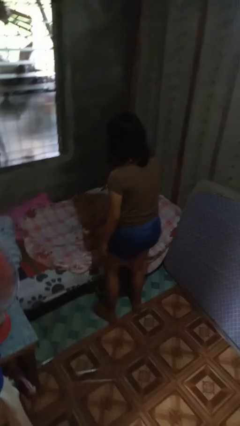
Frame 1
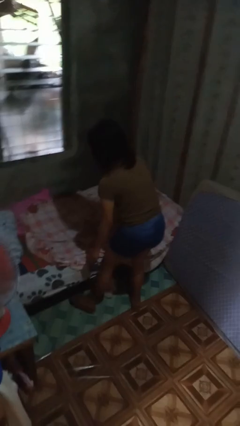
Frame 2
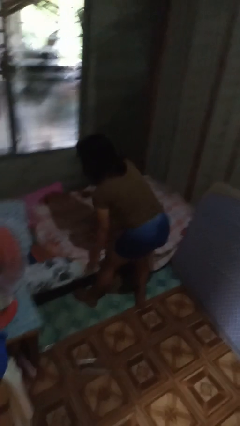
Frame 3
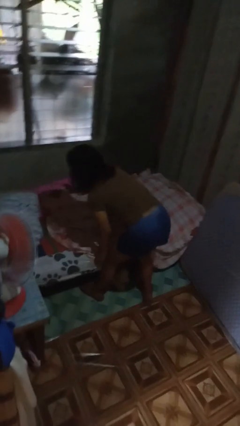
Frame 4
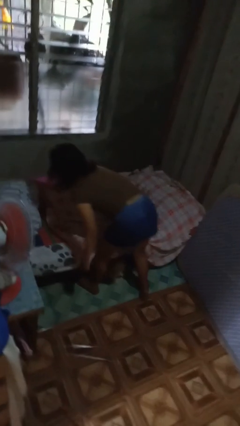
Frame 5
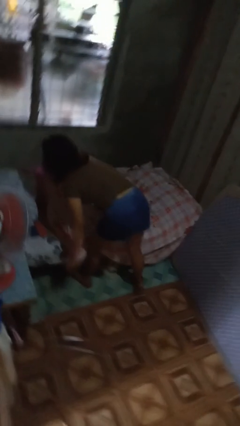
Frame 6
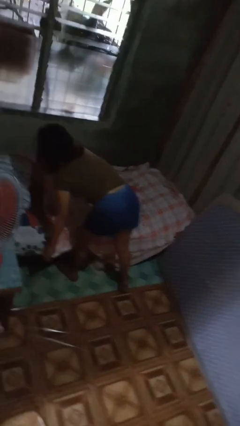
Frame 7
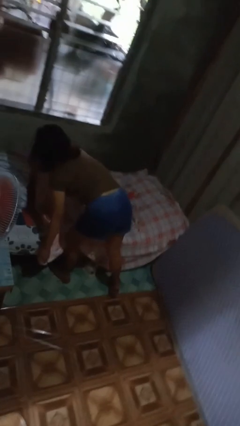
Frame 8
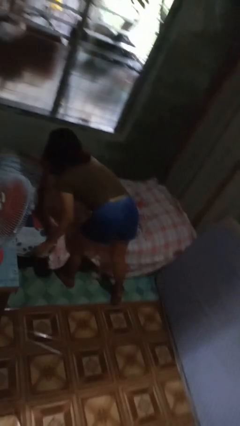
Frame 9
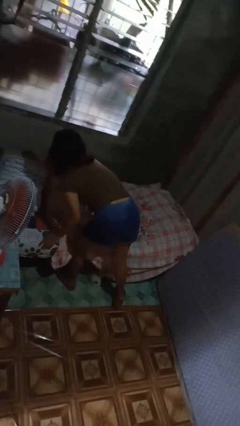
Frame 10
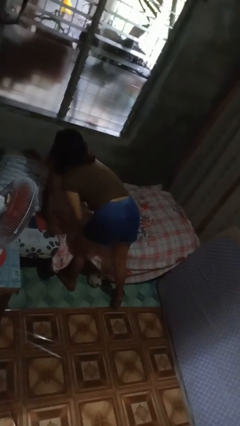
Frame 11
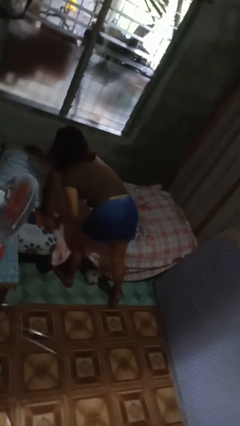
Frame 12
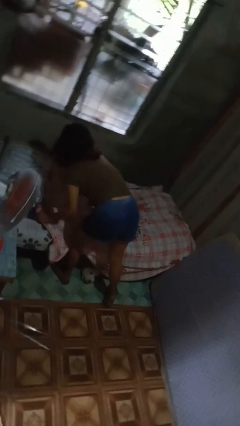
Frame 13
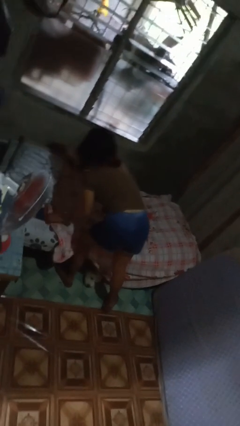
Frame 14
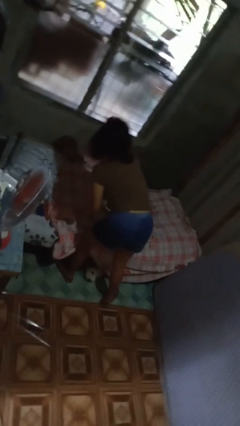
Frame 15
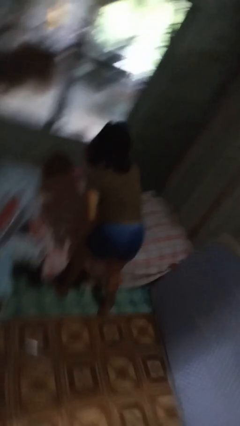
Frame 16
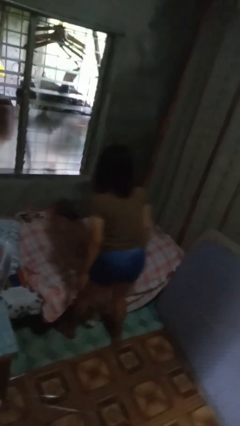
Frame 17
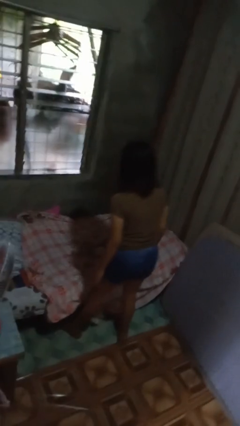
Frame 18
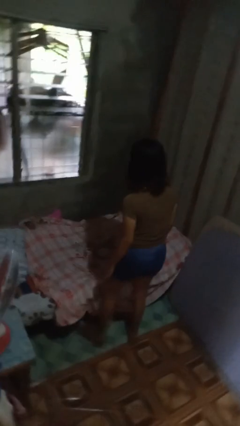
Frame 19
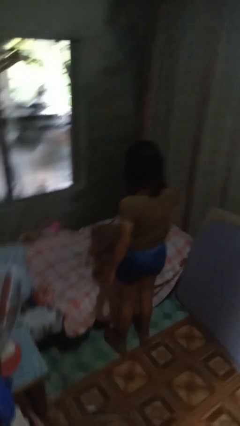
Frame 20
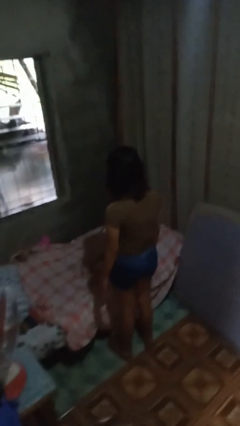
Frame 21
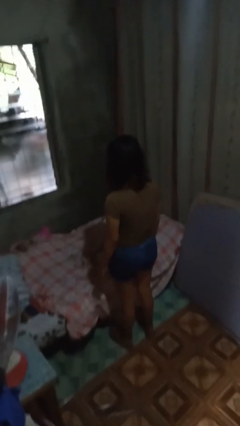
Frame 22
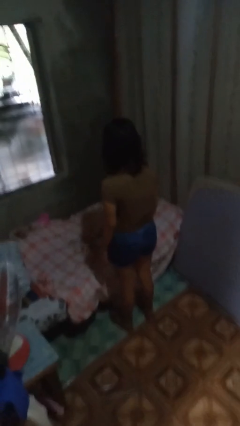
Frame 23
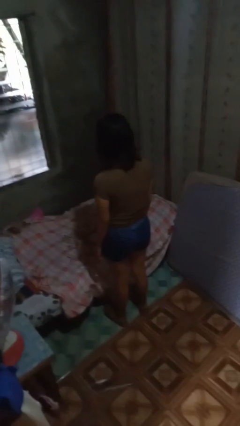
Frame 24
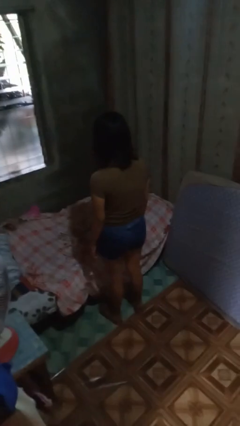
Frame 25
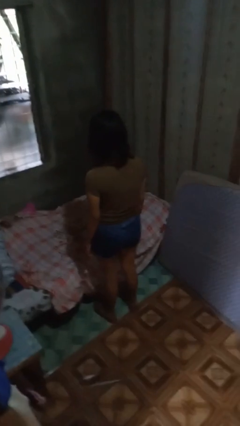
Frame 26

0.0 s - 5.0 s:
person makes bed

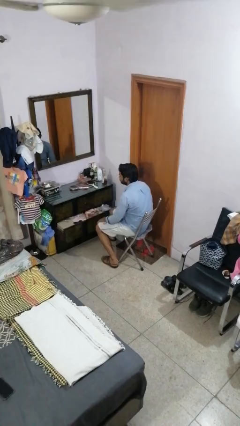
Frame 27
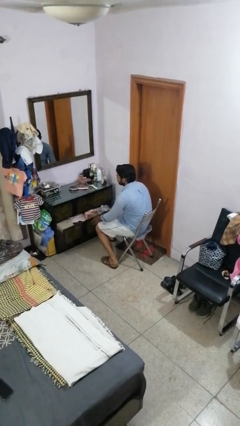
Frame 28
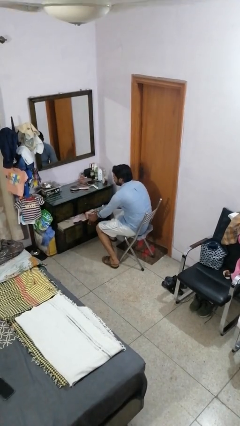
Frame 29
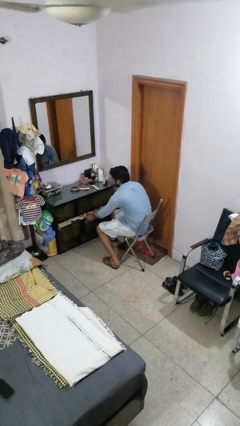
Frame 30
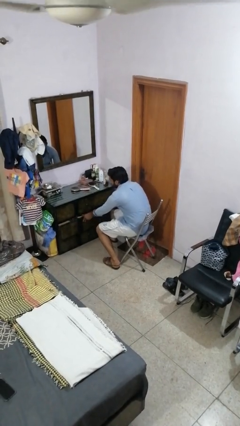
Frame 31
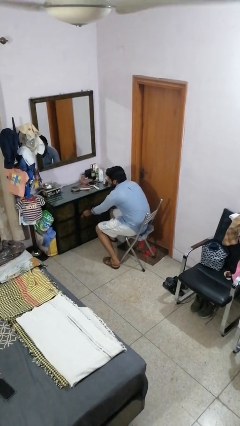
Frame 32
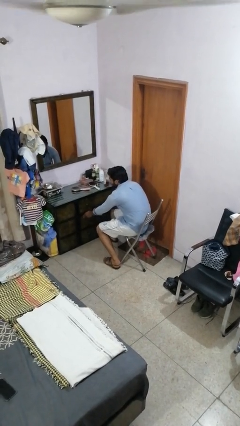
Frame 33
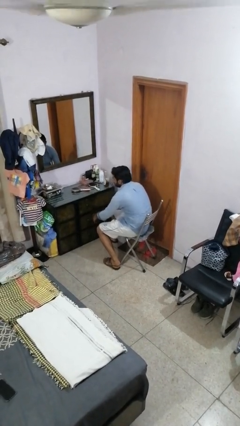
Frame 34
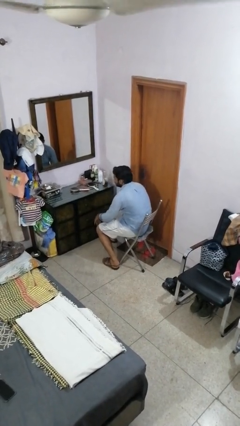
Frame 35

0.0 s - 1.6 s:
person closes dresser drawer

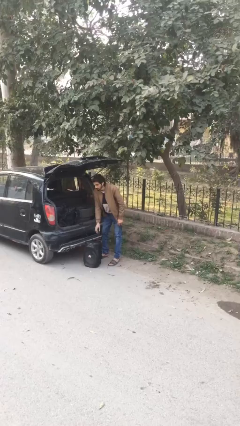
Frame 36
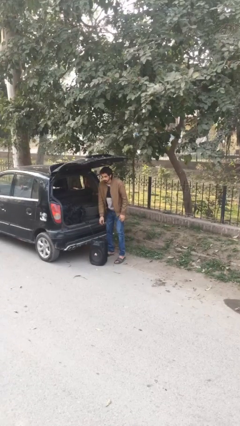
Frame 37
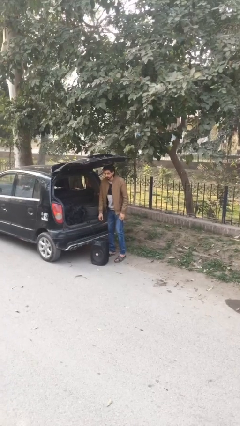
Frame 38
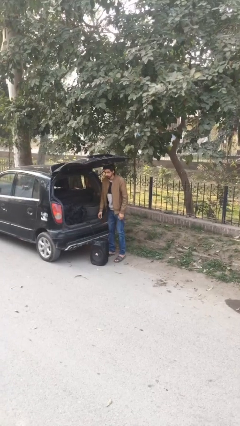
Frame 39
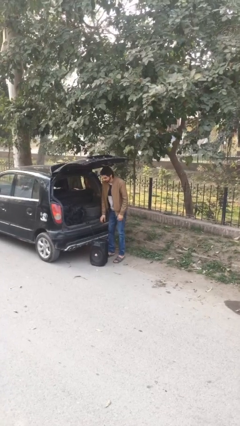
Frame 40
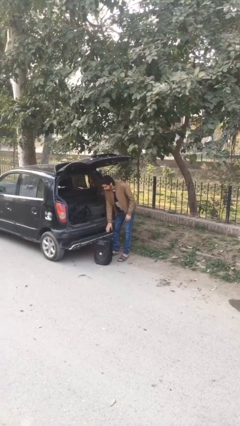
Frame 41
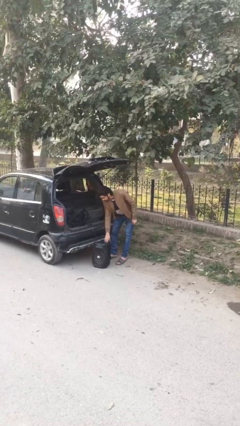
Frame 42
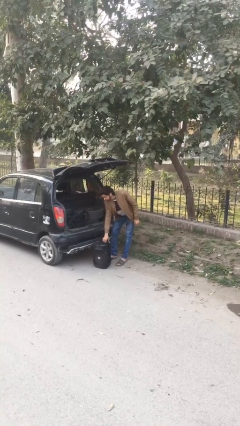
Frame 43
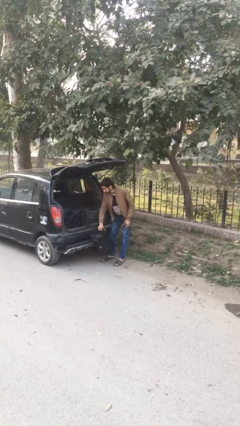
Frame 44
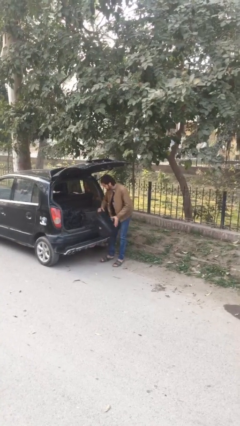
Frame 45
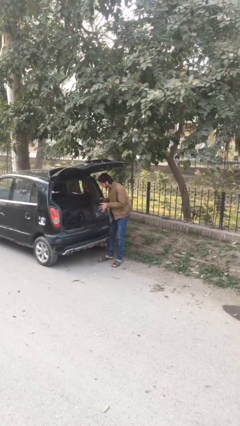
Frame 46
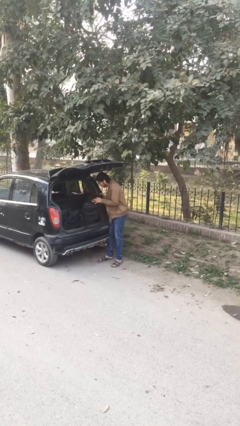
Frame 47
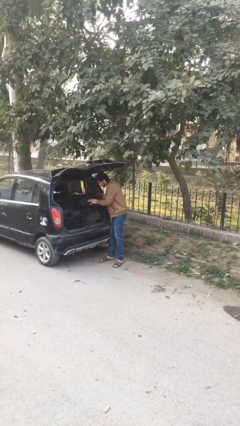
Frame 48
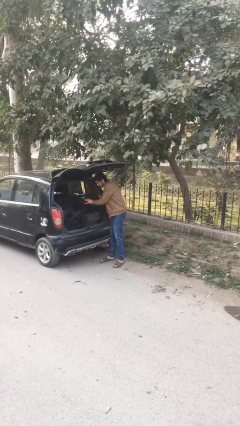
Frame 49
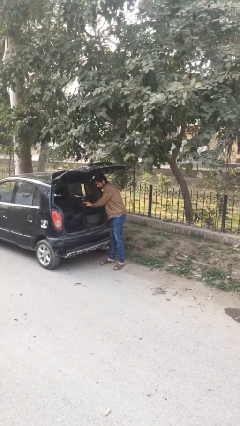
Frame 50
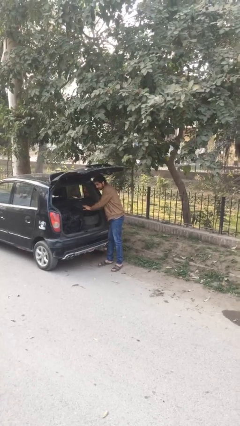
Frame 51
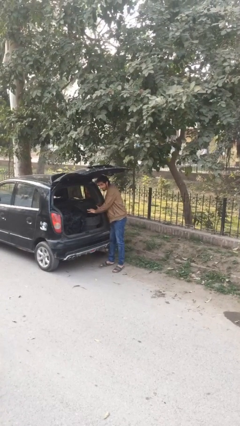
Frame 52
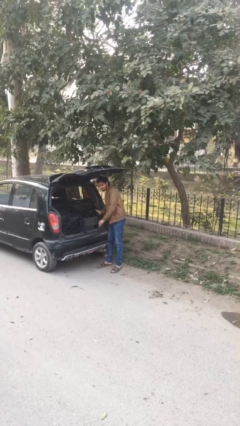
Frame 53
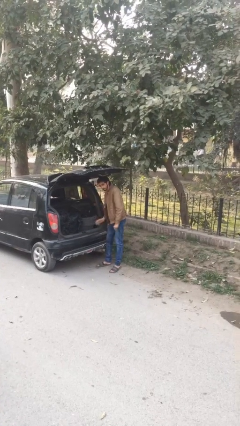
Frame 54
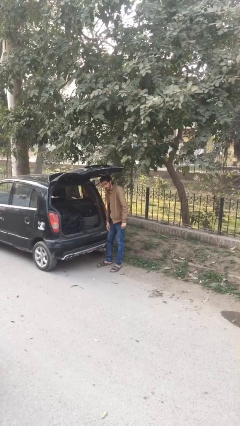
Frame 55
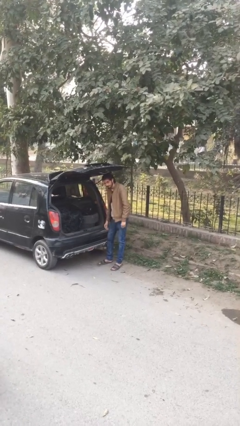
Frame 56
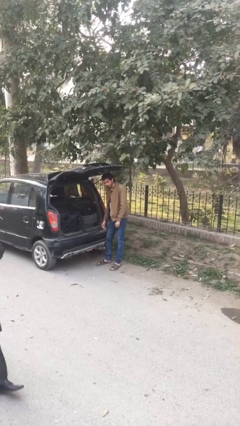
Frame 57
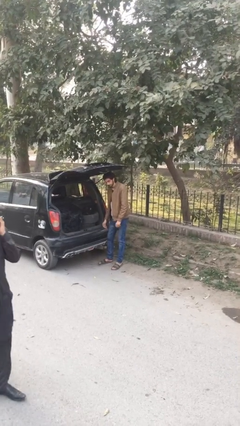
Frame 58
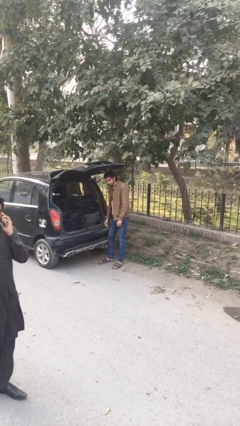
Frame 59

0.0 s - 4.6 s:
person loads car

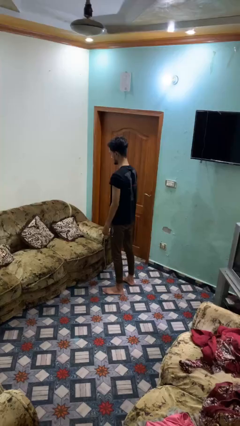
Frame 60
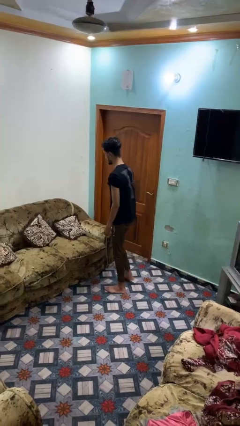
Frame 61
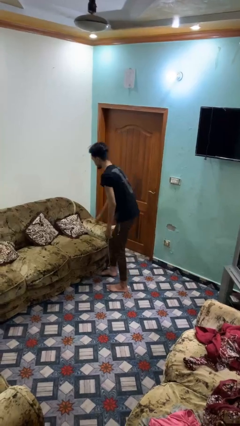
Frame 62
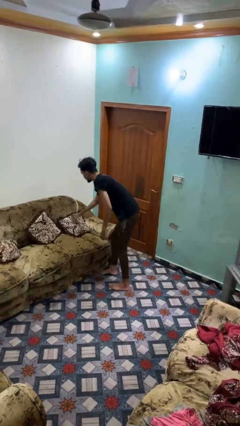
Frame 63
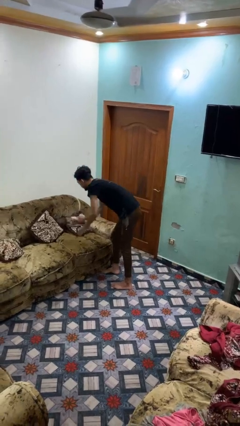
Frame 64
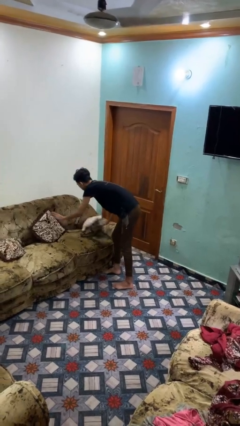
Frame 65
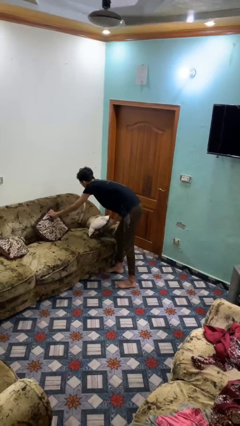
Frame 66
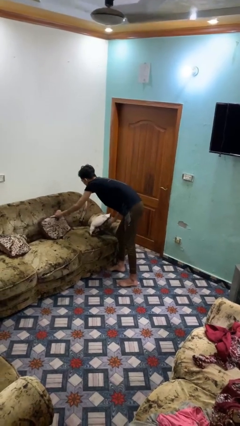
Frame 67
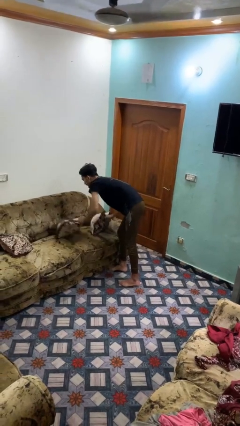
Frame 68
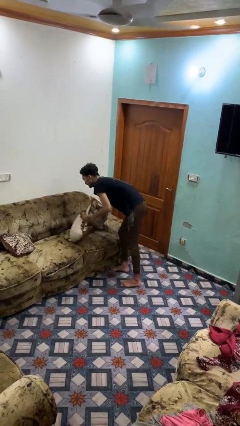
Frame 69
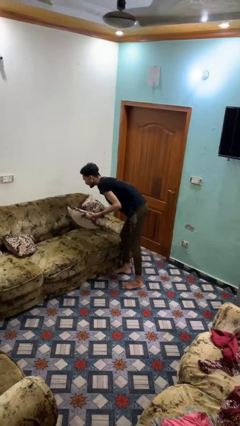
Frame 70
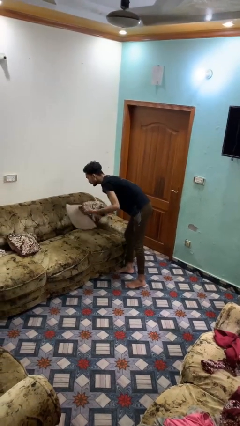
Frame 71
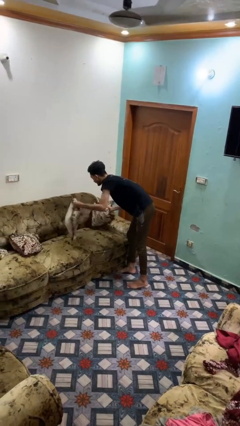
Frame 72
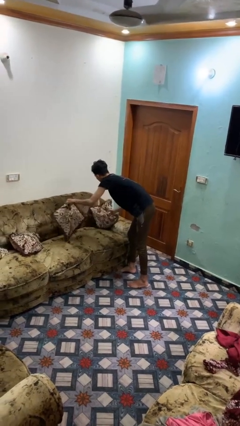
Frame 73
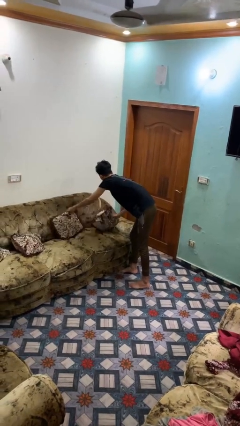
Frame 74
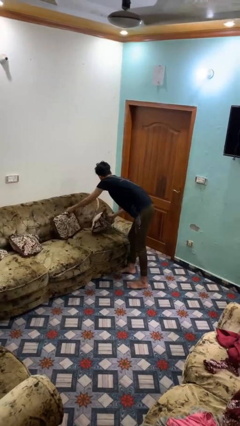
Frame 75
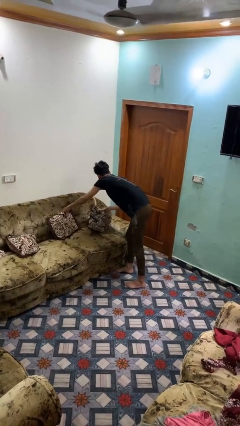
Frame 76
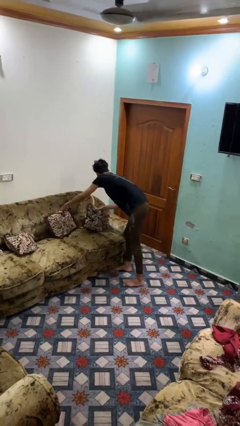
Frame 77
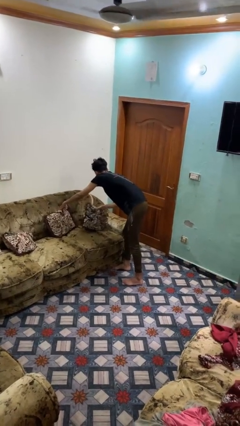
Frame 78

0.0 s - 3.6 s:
person searches under couch

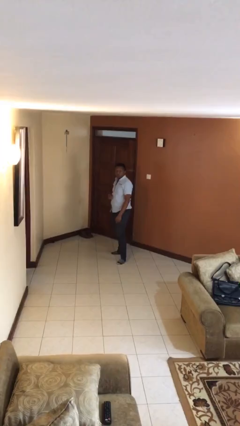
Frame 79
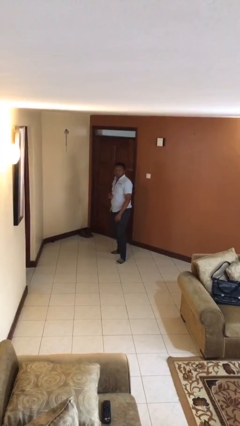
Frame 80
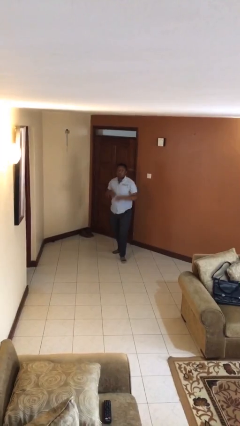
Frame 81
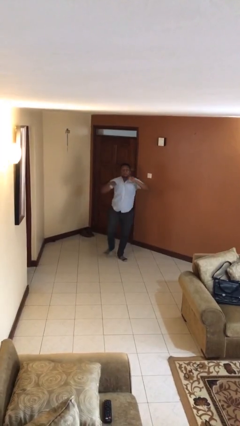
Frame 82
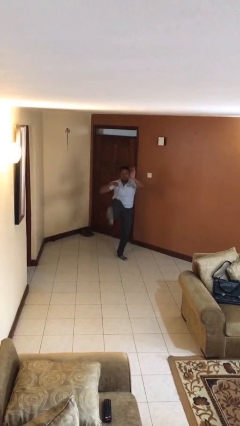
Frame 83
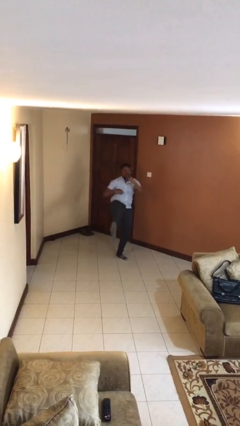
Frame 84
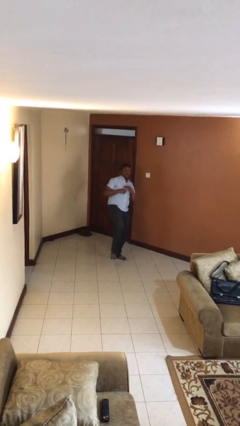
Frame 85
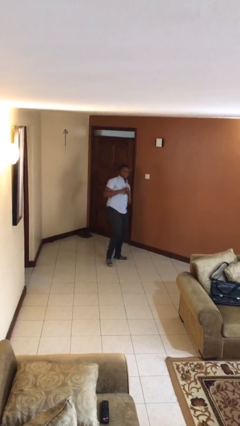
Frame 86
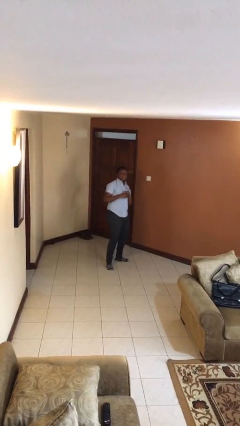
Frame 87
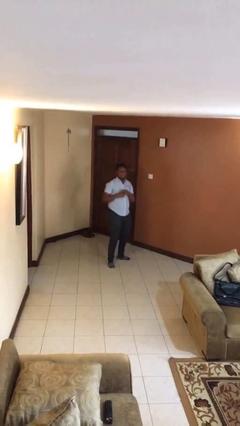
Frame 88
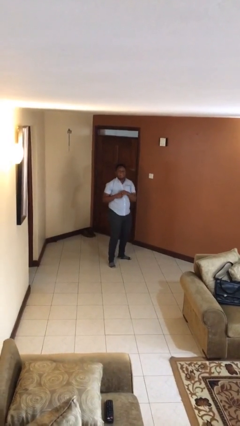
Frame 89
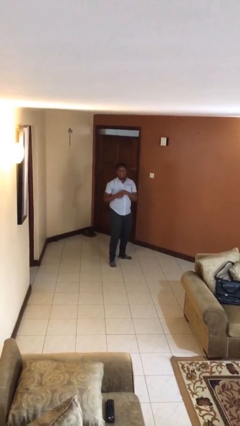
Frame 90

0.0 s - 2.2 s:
person karate kicks

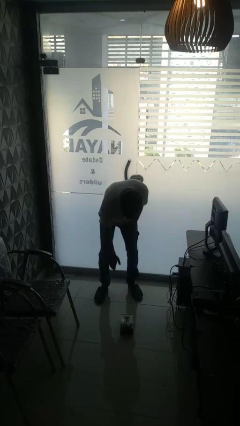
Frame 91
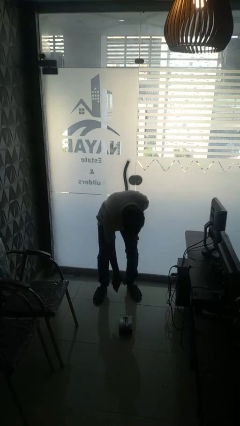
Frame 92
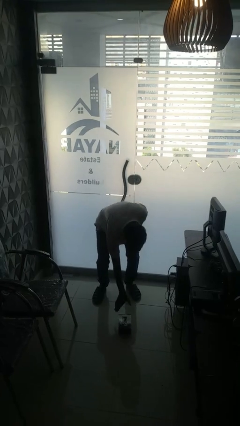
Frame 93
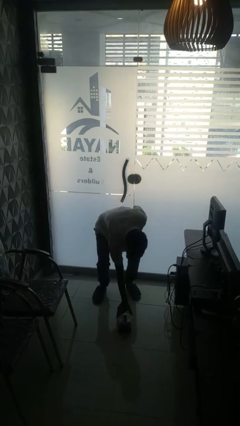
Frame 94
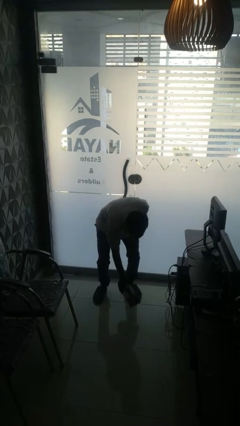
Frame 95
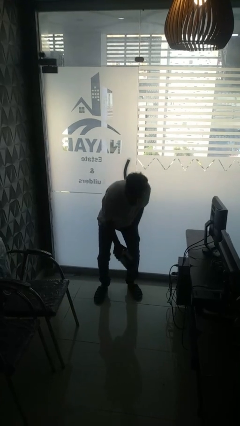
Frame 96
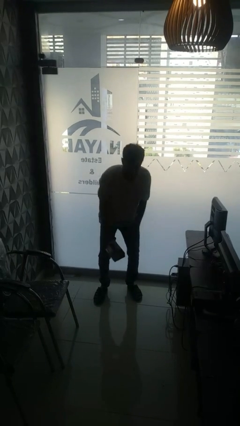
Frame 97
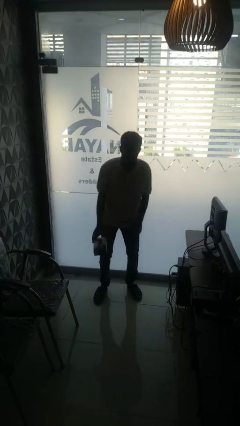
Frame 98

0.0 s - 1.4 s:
person picks up object from floor
